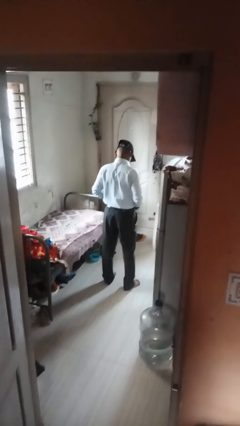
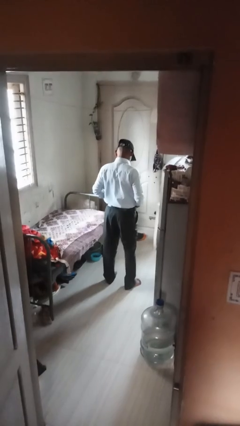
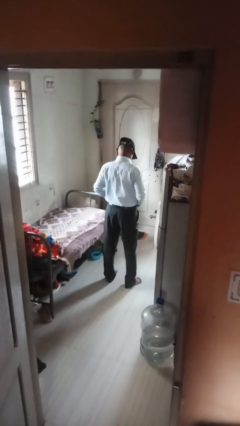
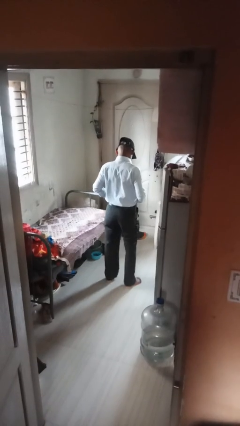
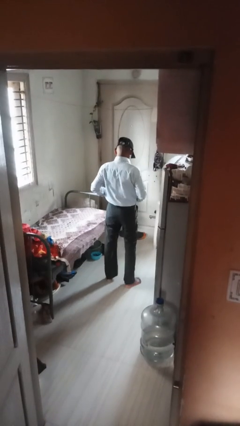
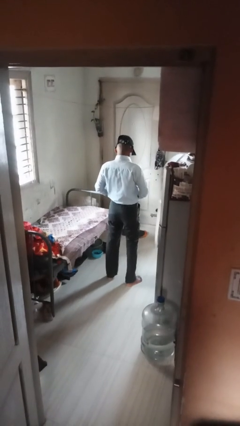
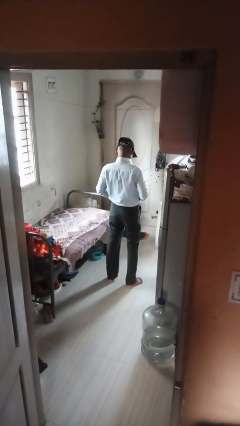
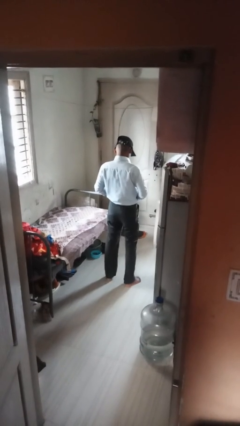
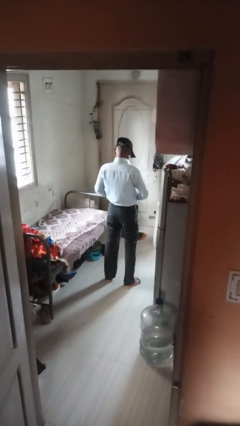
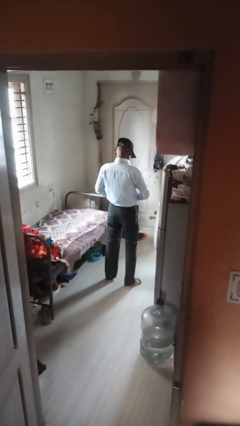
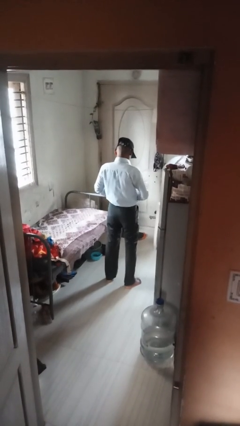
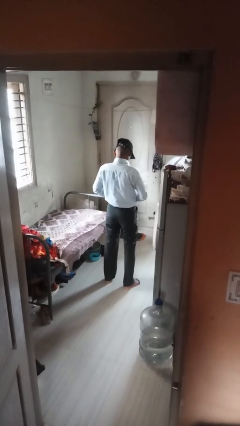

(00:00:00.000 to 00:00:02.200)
person hikes up pants

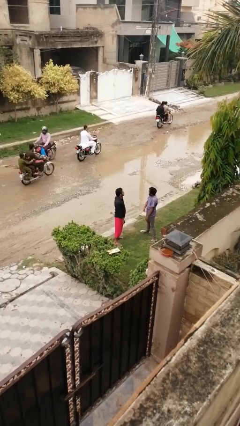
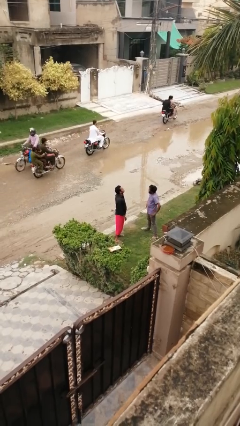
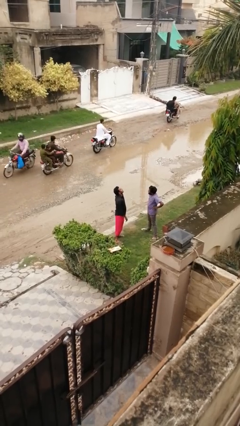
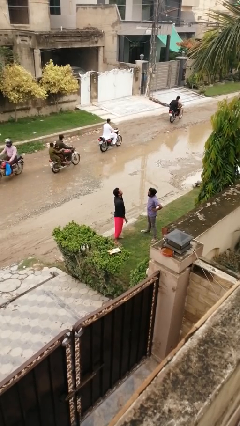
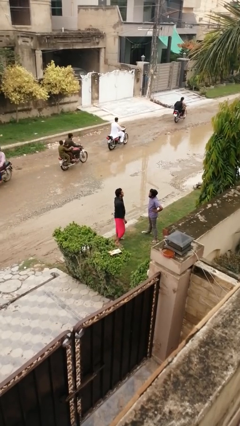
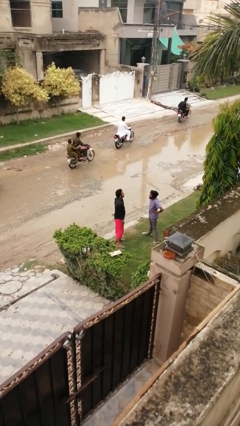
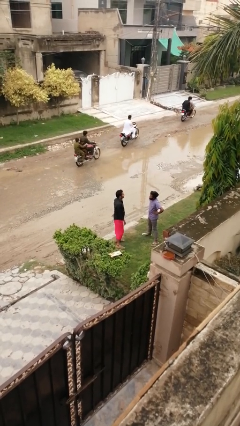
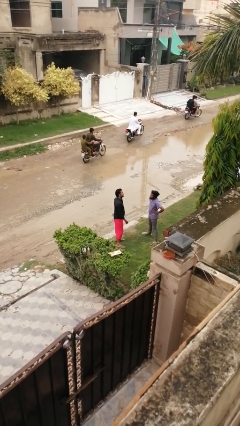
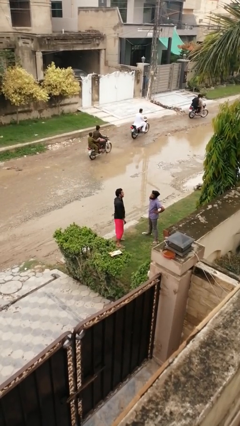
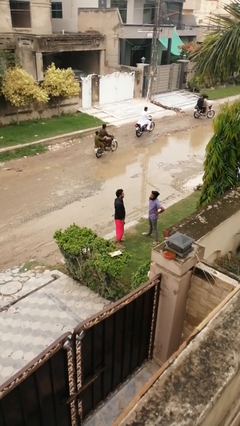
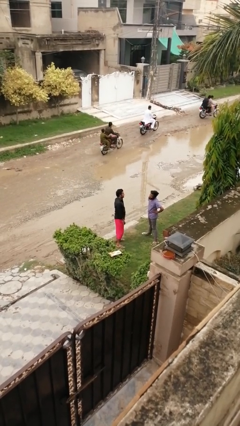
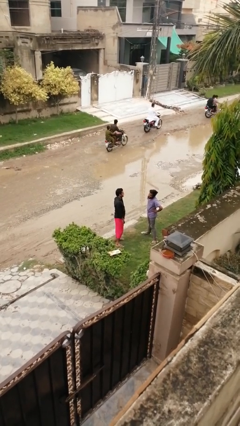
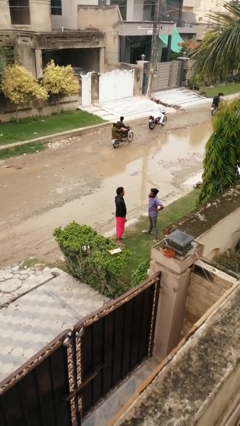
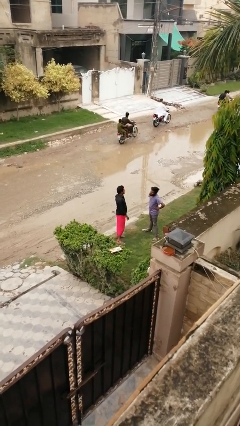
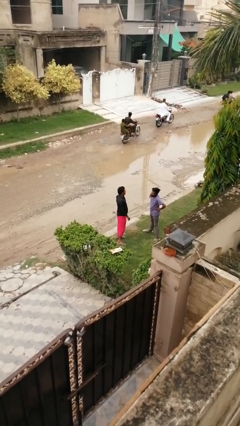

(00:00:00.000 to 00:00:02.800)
person laughs with person

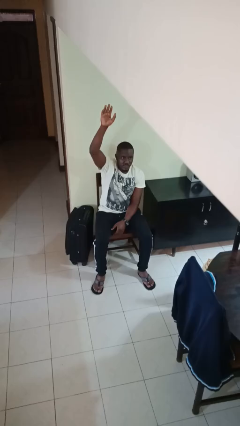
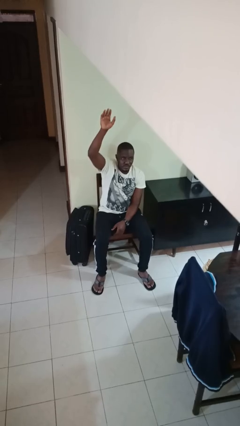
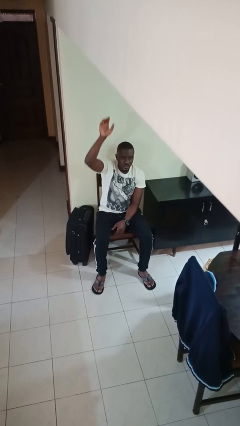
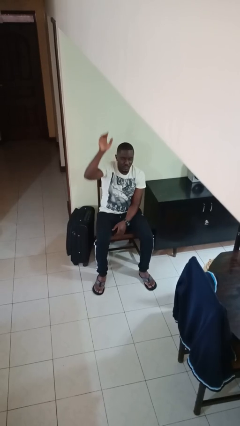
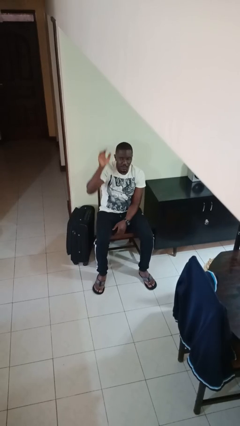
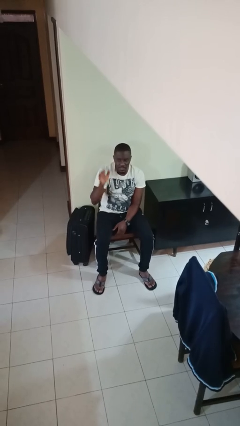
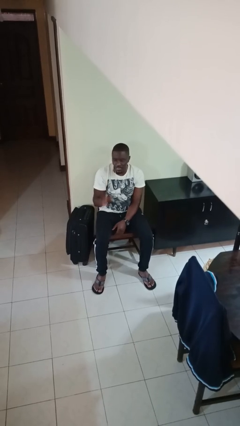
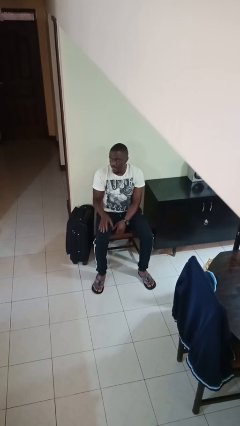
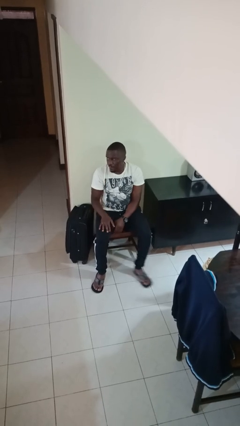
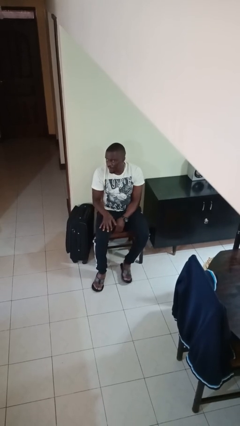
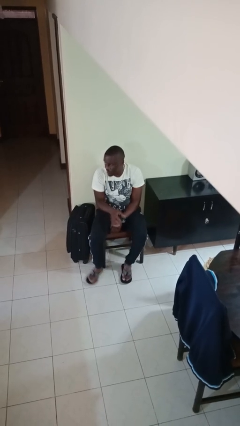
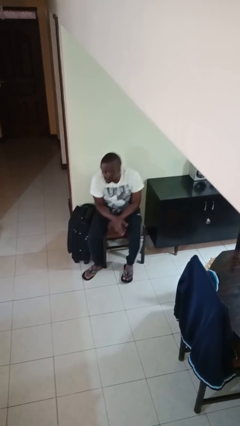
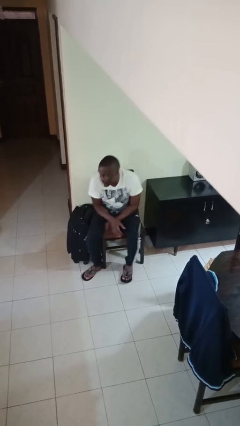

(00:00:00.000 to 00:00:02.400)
person gestures lower hand

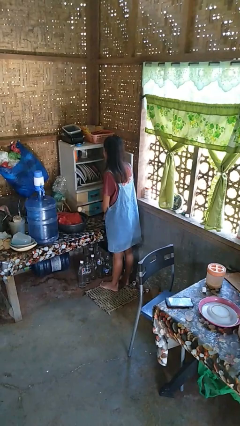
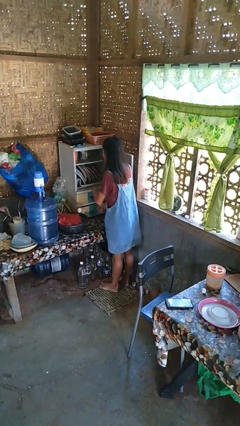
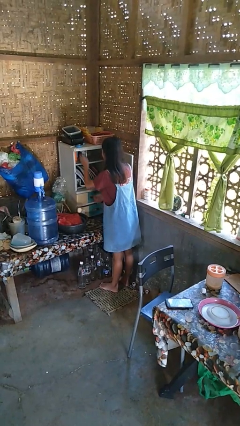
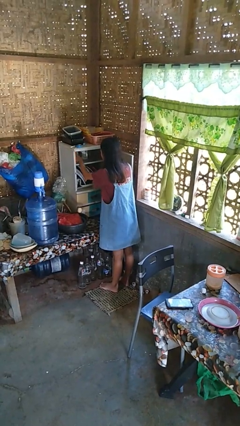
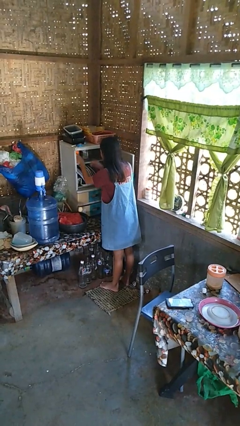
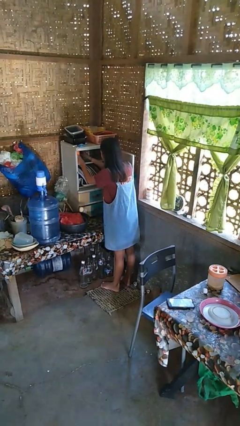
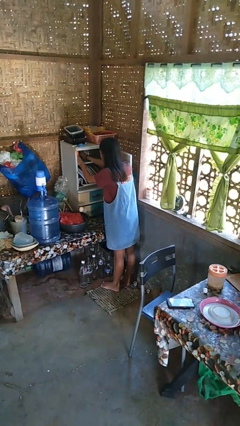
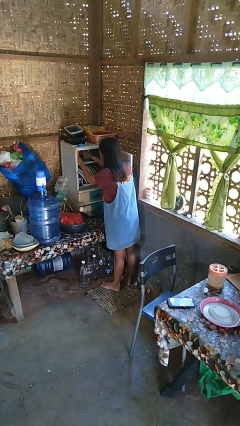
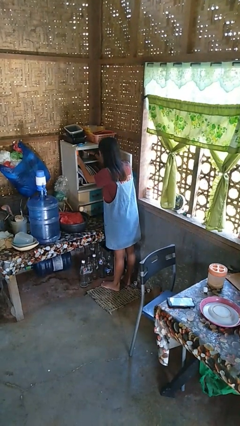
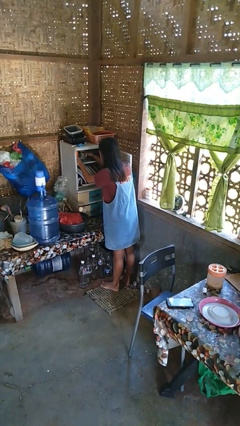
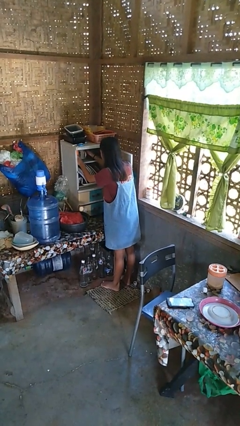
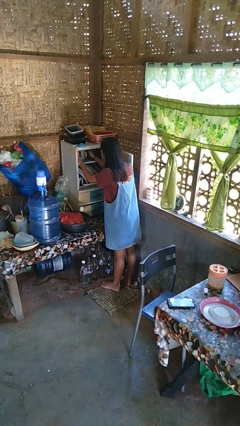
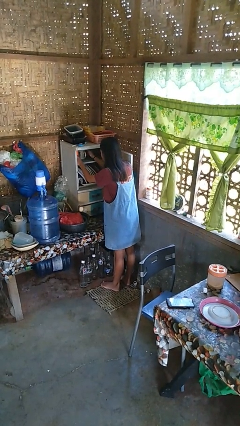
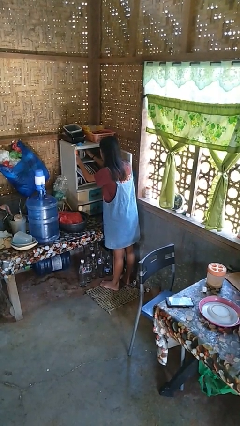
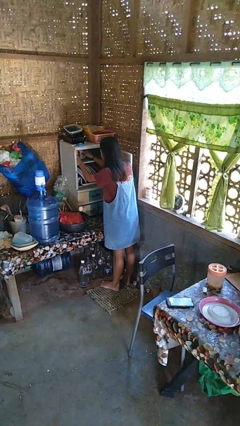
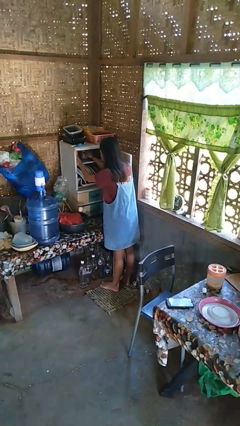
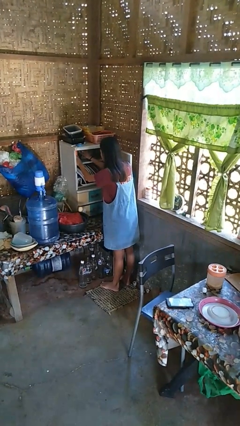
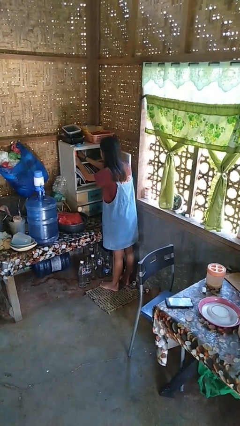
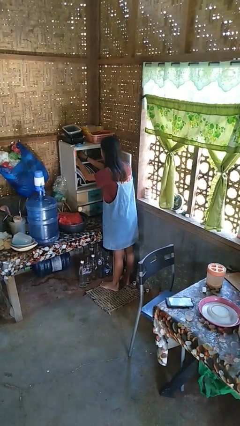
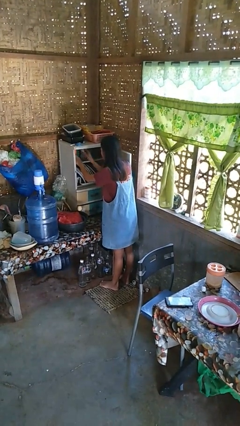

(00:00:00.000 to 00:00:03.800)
person searches in cabinet

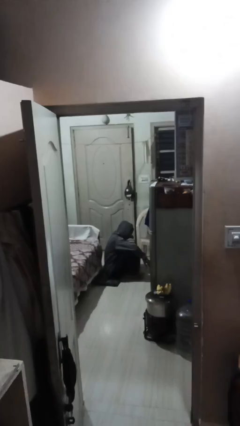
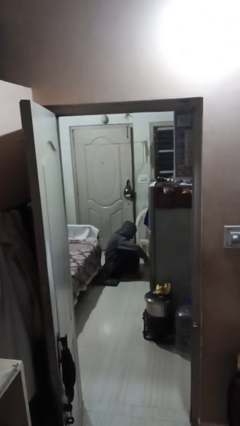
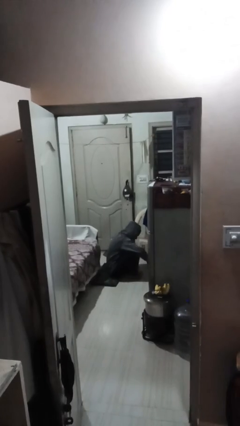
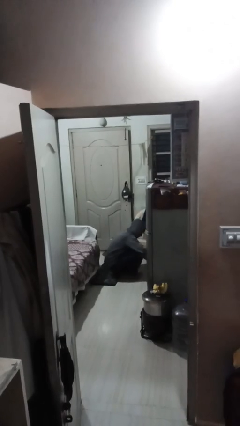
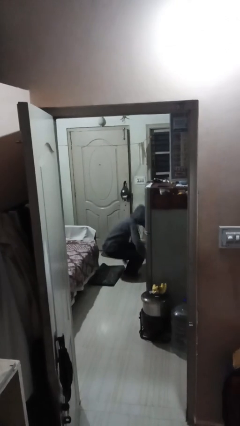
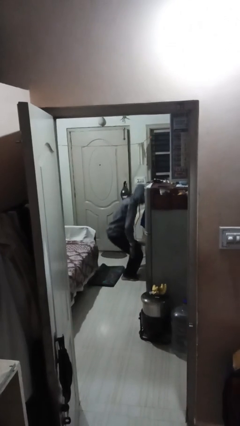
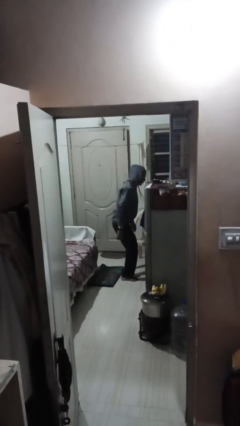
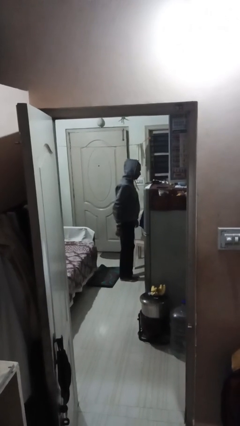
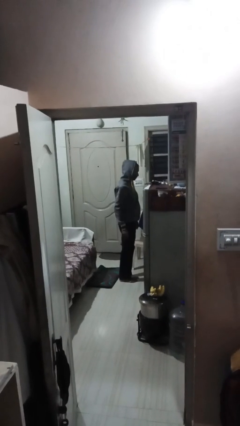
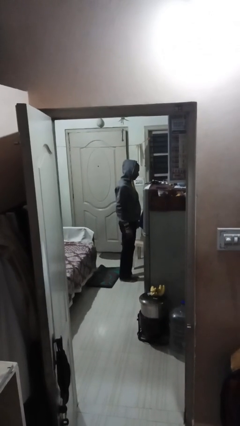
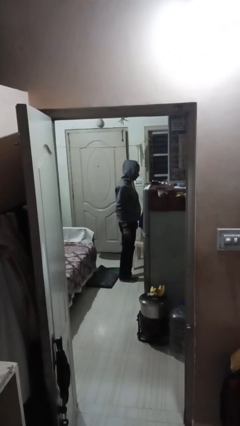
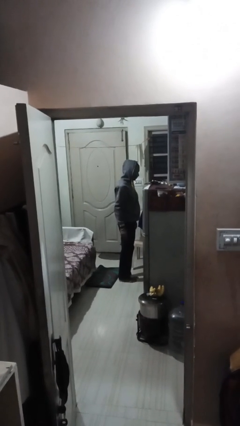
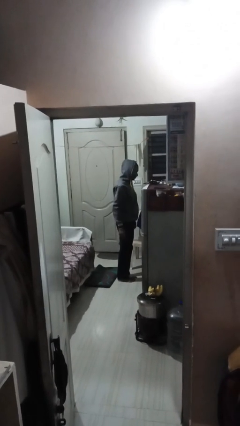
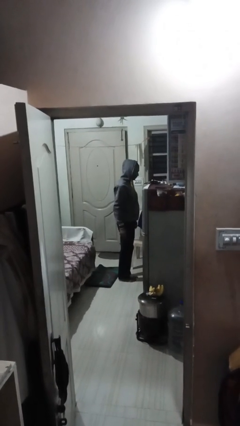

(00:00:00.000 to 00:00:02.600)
person stands up

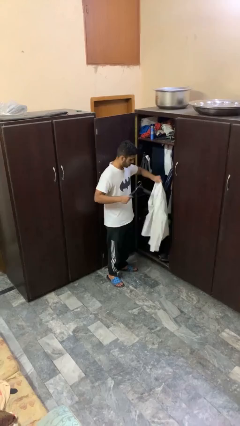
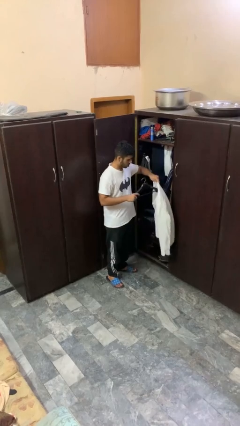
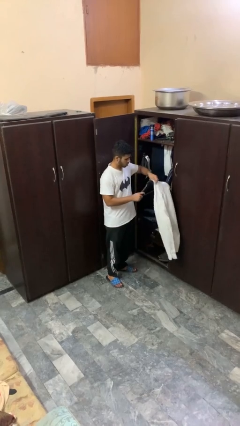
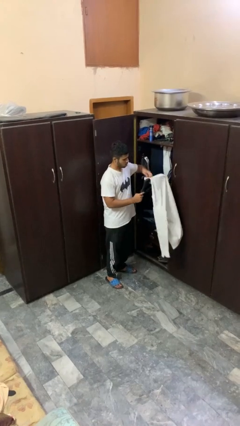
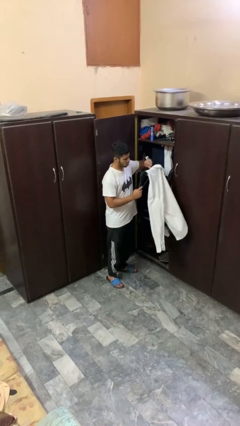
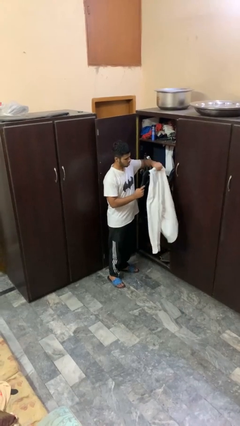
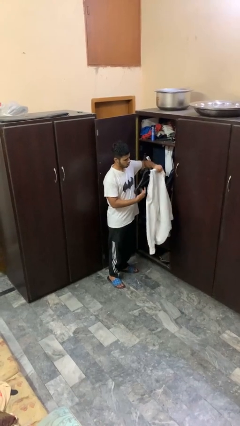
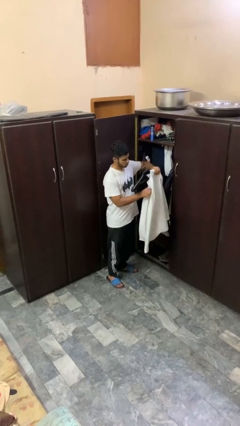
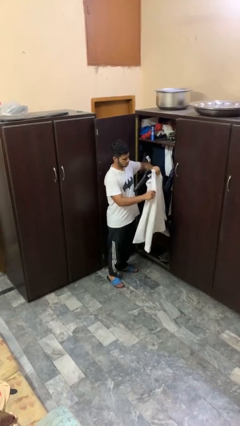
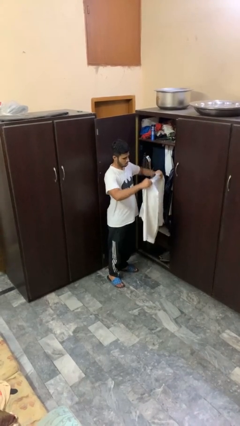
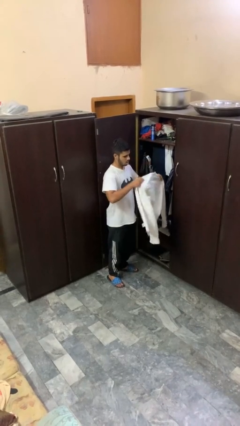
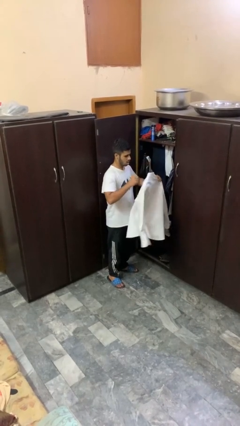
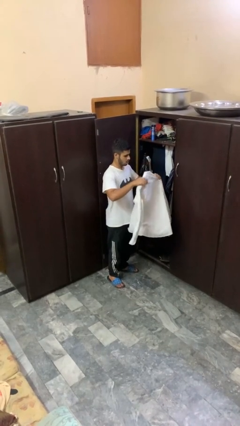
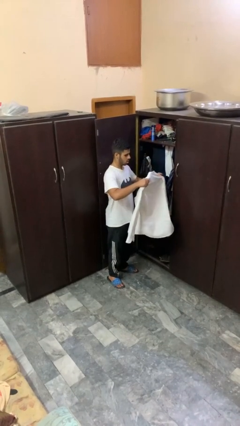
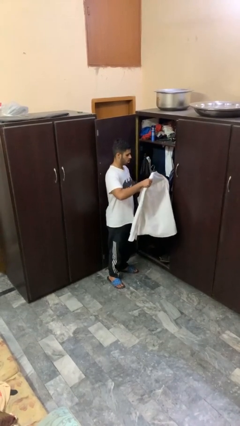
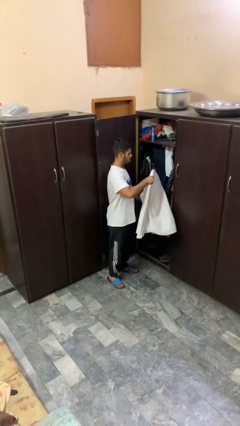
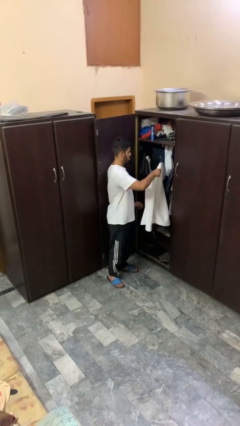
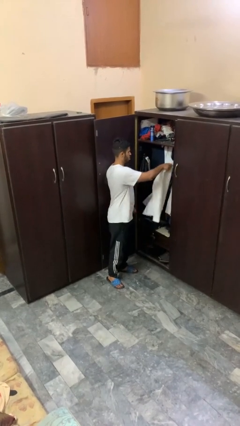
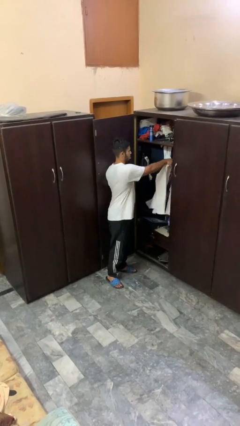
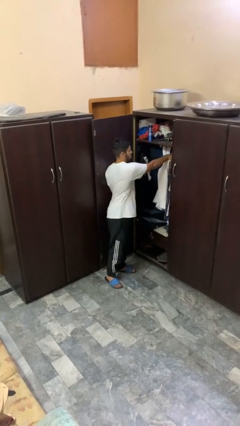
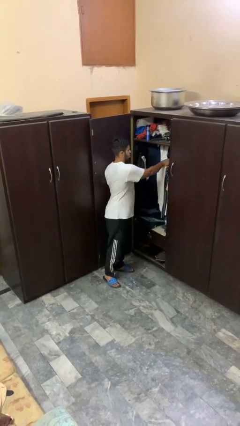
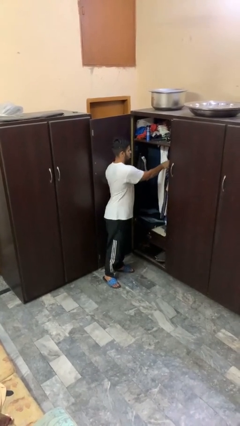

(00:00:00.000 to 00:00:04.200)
person puts clothes into closet
